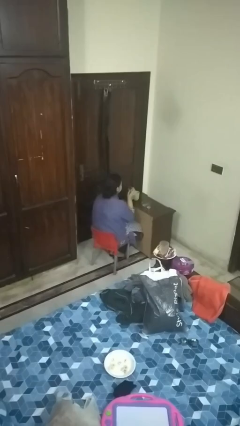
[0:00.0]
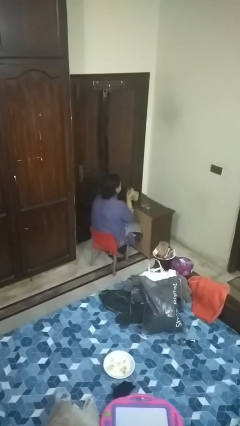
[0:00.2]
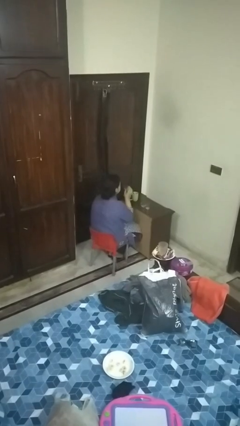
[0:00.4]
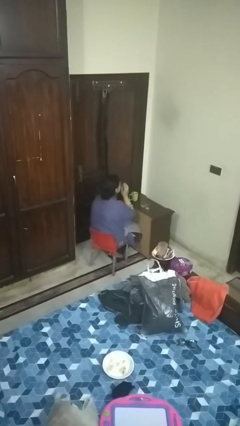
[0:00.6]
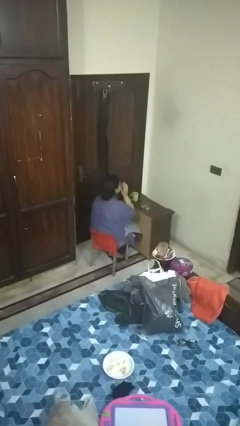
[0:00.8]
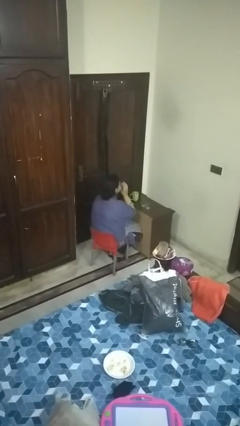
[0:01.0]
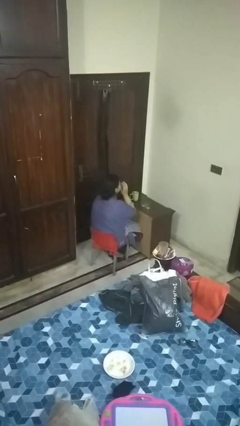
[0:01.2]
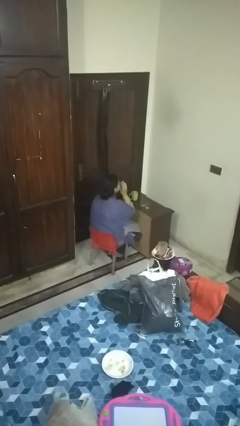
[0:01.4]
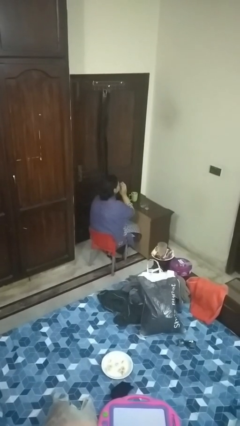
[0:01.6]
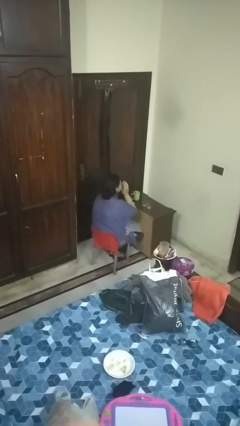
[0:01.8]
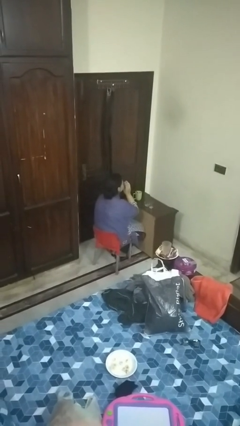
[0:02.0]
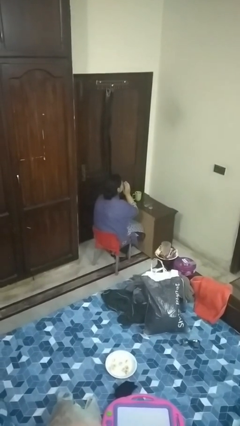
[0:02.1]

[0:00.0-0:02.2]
person drinks from shotglass

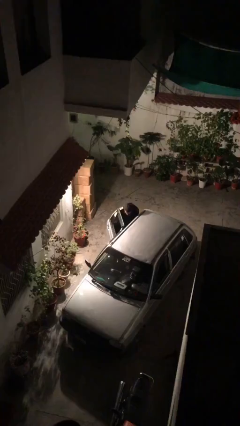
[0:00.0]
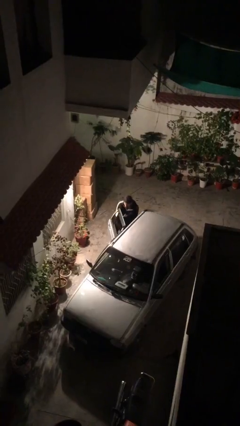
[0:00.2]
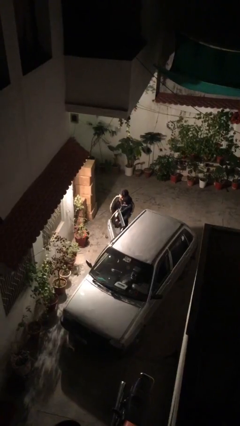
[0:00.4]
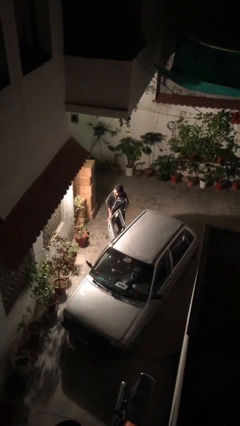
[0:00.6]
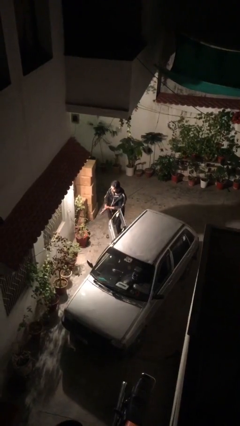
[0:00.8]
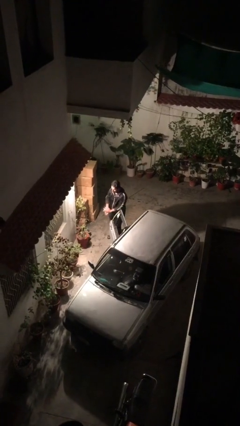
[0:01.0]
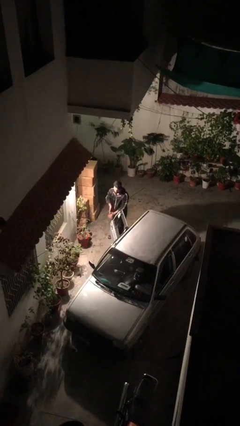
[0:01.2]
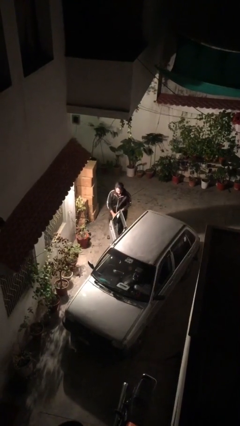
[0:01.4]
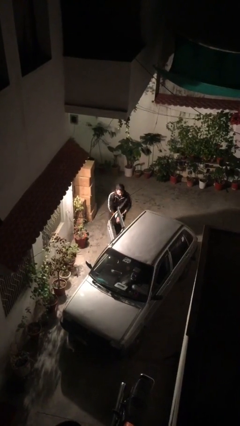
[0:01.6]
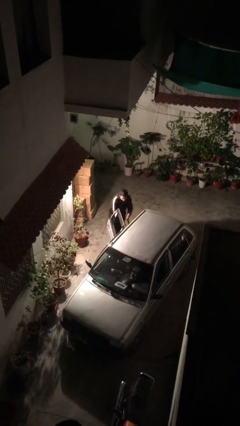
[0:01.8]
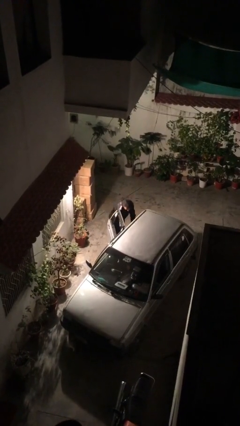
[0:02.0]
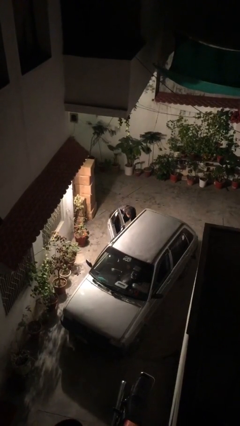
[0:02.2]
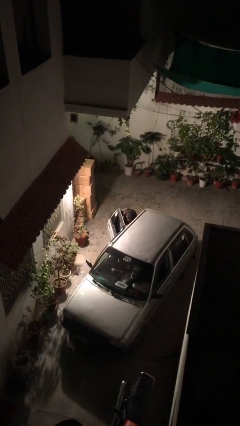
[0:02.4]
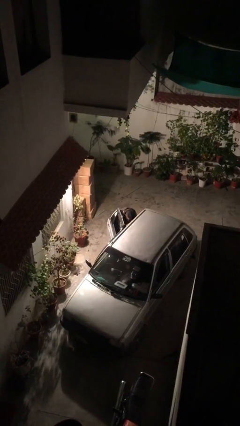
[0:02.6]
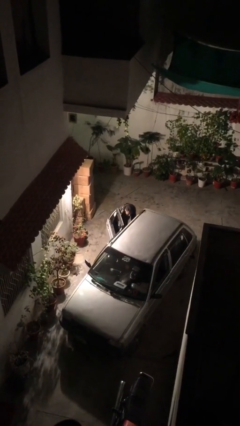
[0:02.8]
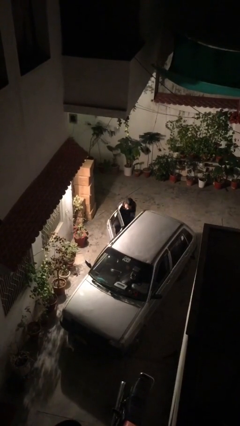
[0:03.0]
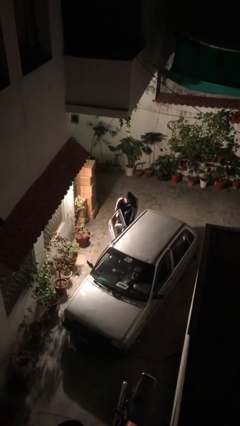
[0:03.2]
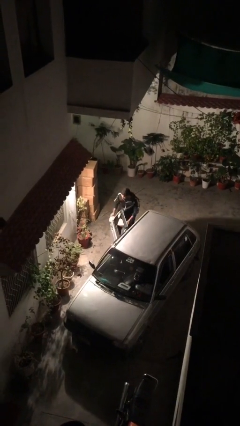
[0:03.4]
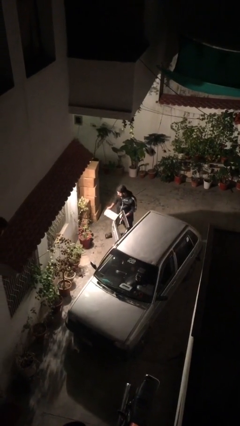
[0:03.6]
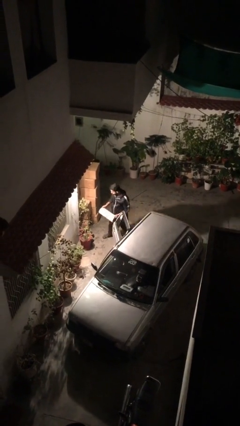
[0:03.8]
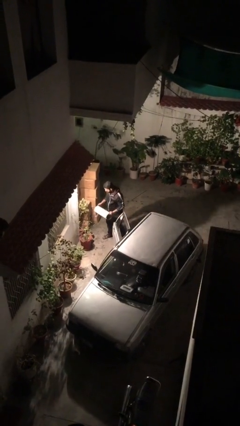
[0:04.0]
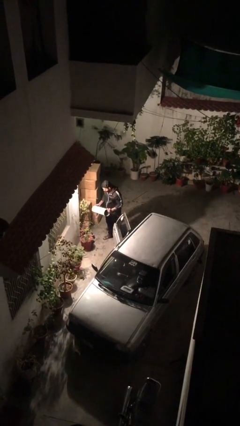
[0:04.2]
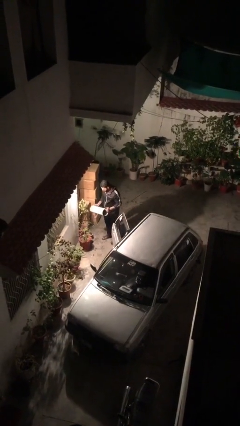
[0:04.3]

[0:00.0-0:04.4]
person unloads car

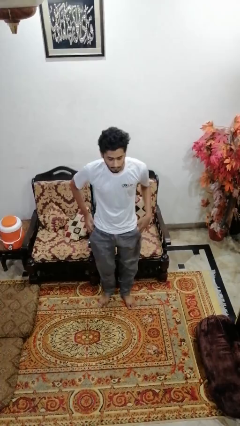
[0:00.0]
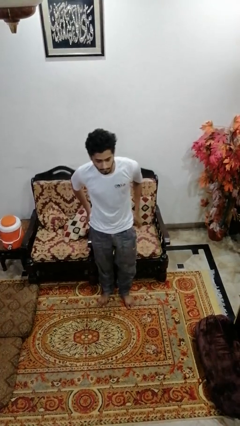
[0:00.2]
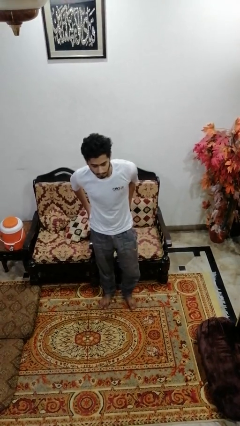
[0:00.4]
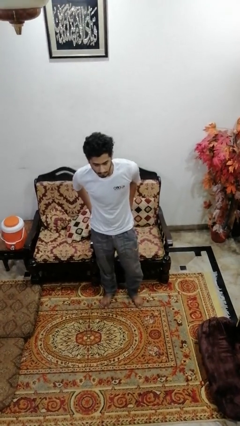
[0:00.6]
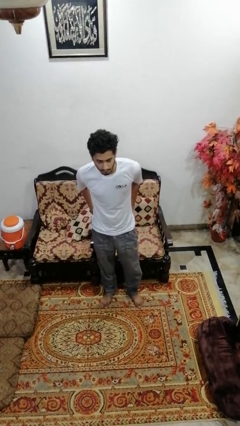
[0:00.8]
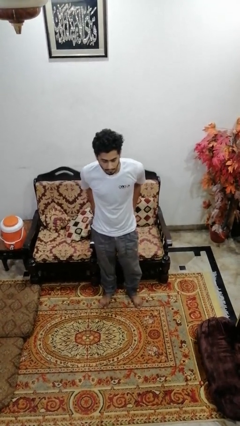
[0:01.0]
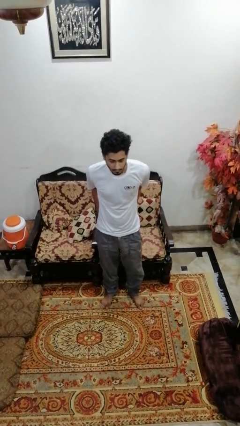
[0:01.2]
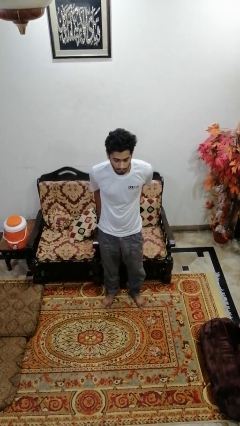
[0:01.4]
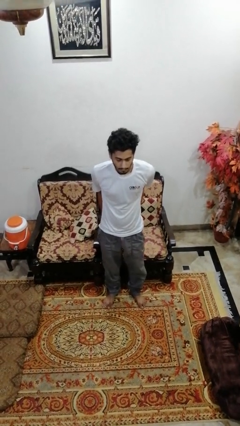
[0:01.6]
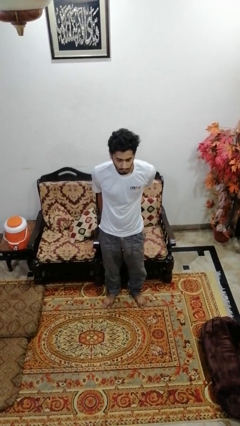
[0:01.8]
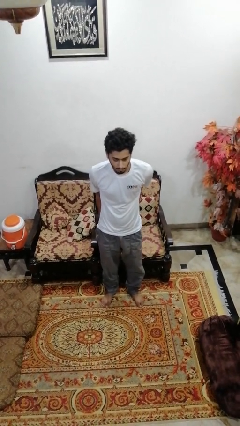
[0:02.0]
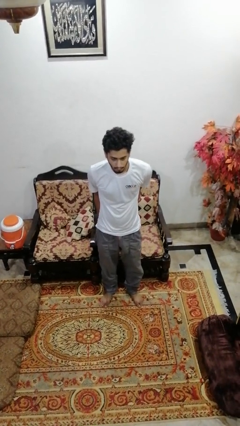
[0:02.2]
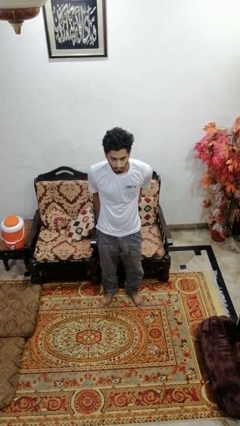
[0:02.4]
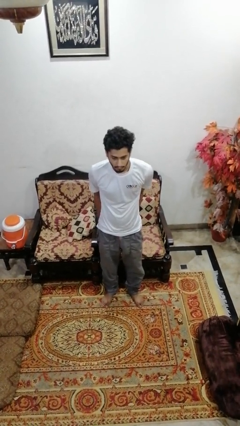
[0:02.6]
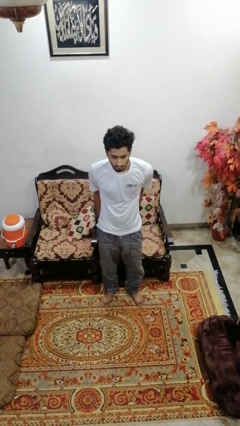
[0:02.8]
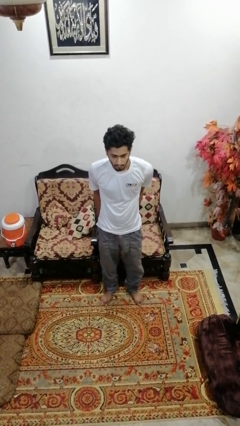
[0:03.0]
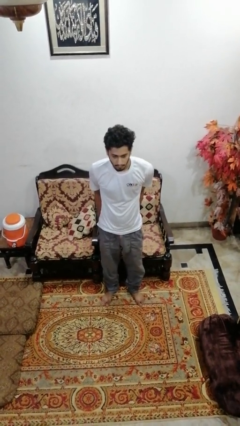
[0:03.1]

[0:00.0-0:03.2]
person puts hands in back pockets

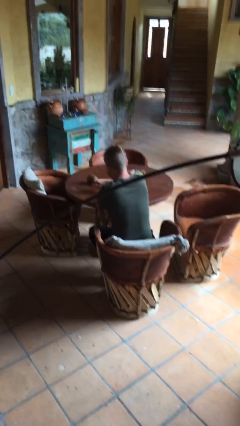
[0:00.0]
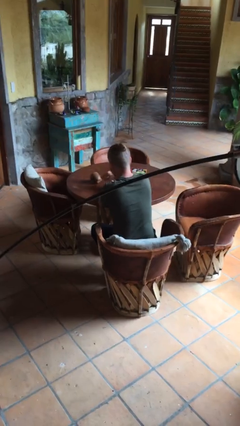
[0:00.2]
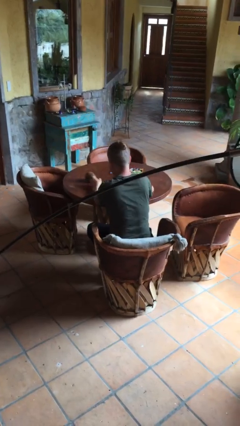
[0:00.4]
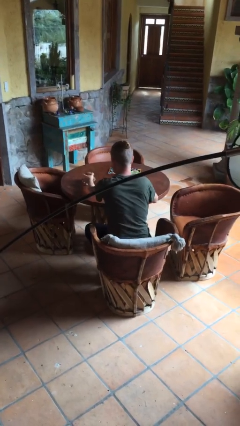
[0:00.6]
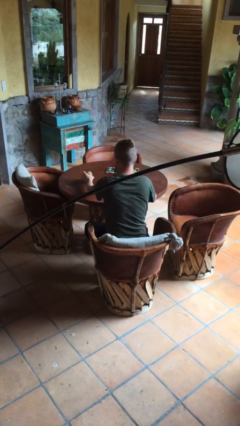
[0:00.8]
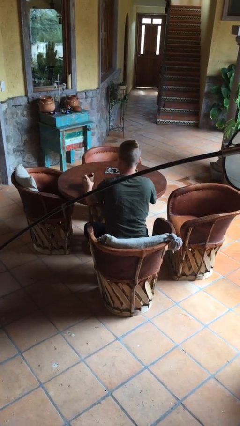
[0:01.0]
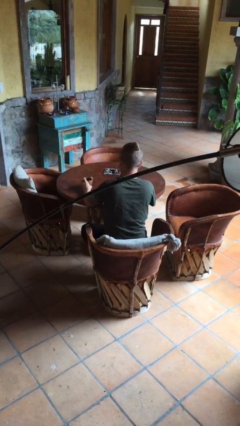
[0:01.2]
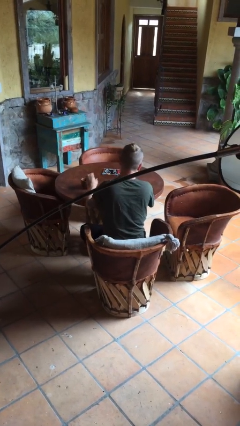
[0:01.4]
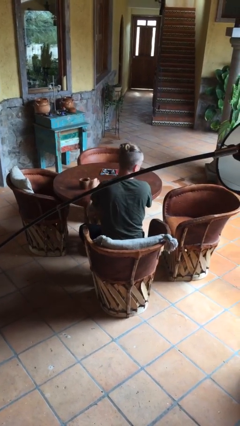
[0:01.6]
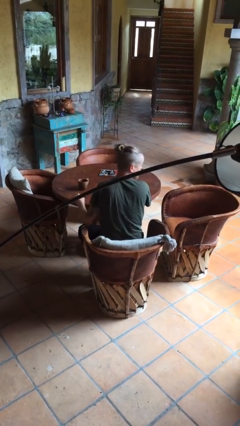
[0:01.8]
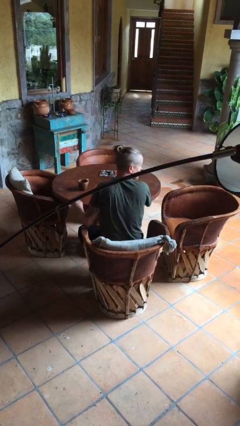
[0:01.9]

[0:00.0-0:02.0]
person sets upright glass

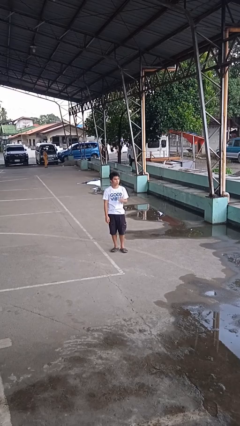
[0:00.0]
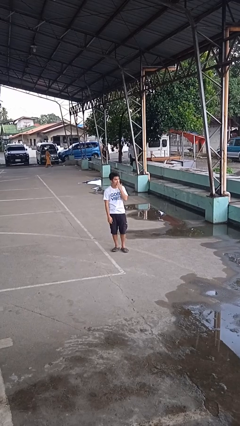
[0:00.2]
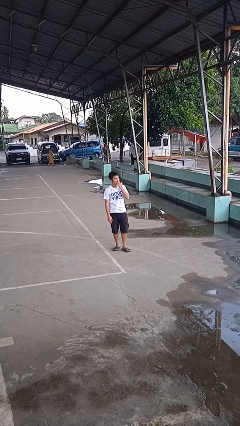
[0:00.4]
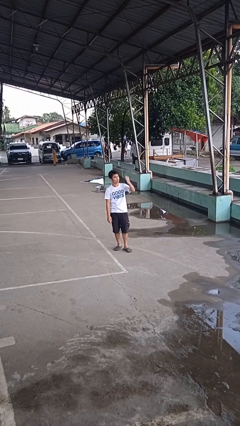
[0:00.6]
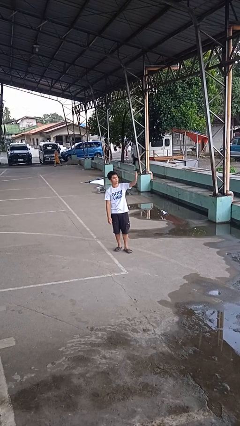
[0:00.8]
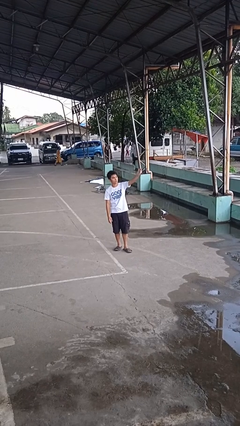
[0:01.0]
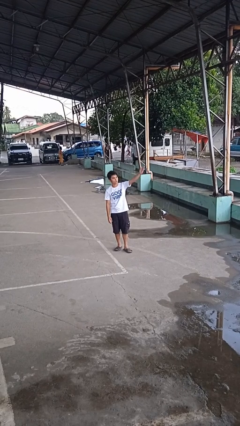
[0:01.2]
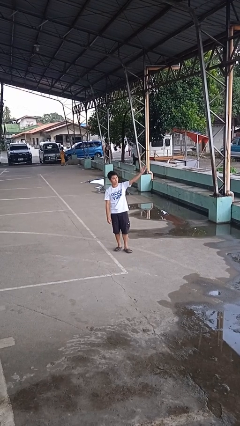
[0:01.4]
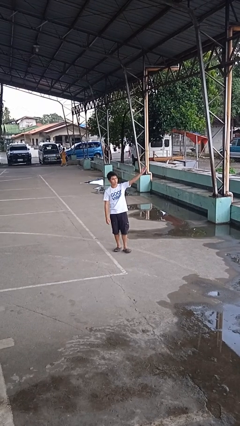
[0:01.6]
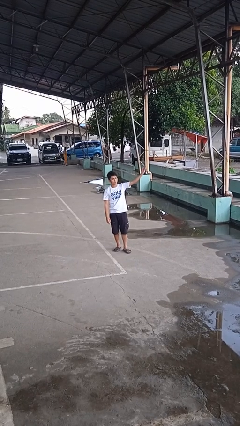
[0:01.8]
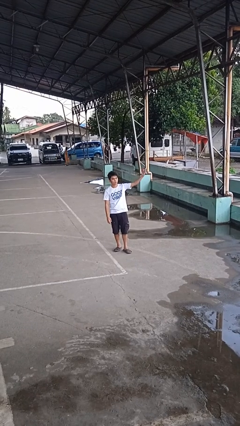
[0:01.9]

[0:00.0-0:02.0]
person gestures blow kiss

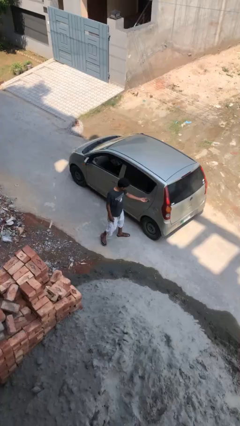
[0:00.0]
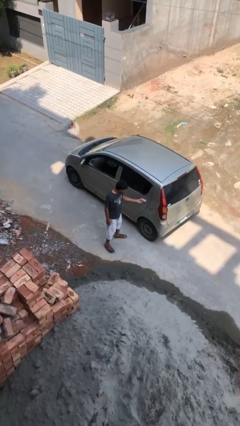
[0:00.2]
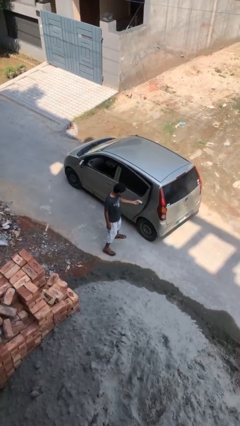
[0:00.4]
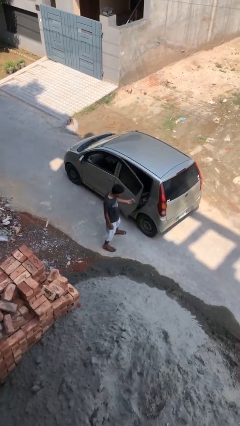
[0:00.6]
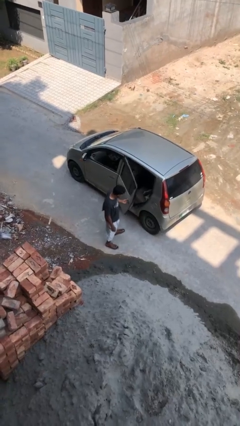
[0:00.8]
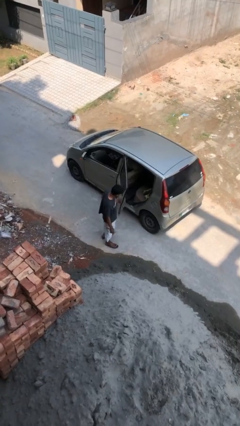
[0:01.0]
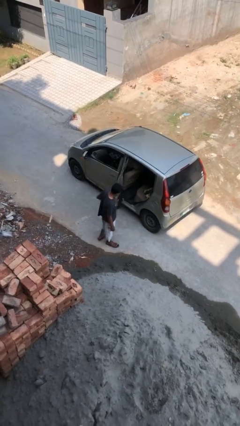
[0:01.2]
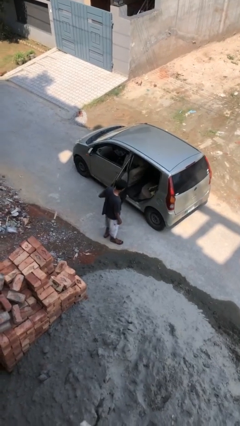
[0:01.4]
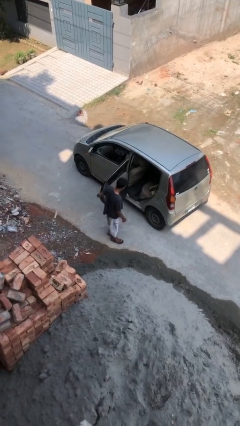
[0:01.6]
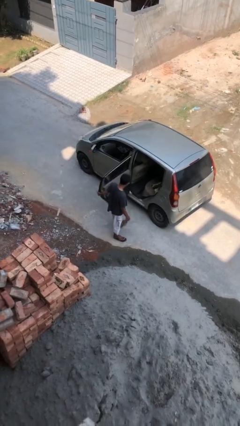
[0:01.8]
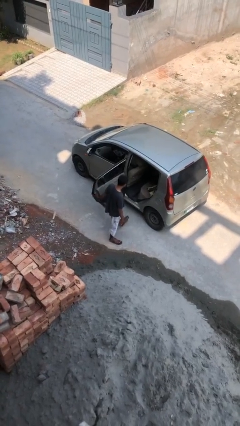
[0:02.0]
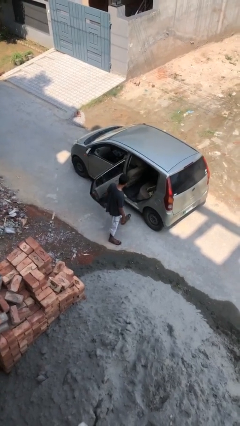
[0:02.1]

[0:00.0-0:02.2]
person opens car door

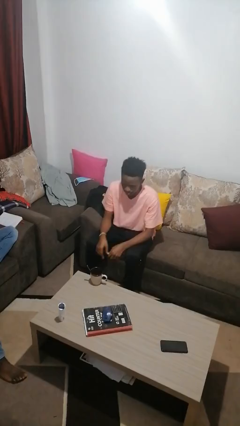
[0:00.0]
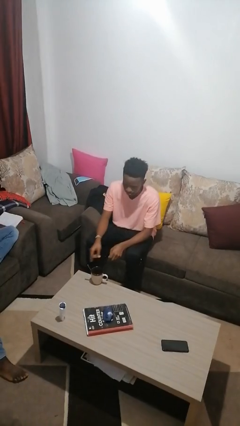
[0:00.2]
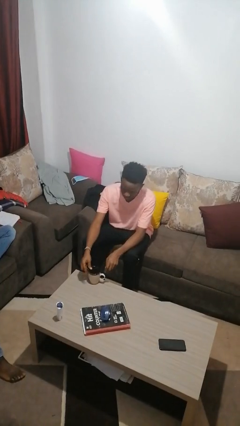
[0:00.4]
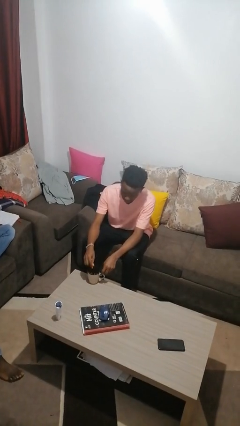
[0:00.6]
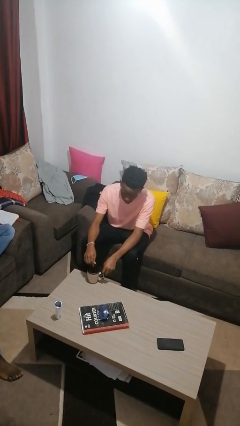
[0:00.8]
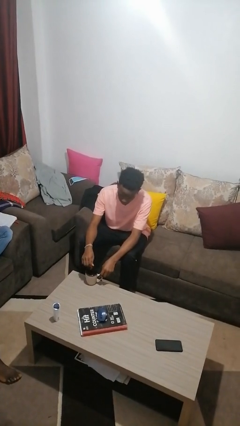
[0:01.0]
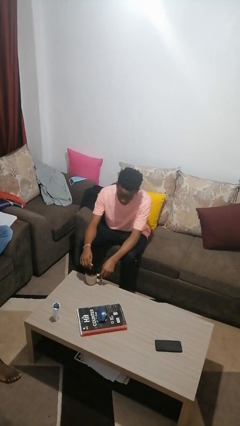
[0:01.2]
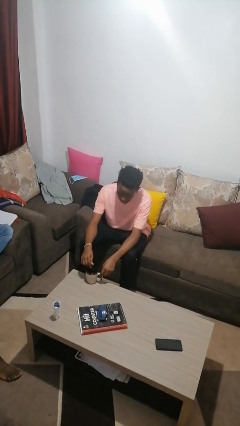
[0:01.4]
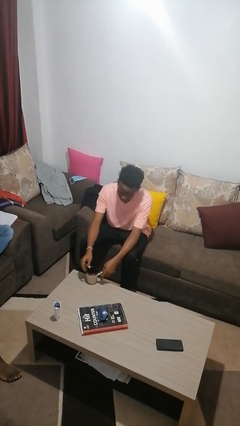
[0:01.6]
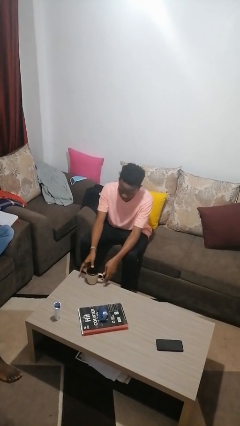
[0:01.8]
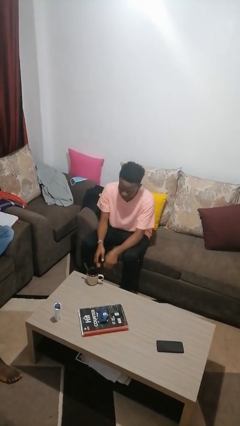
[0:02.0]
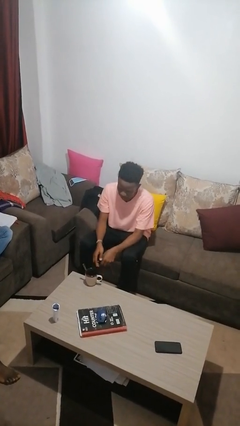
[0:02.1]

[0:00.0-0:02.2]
person stirs mug
